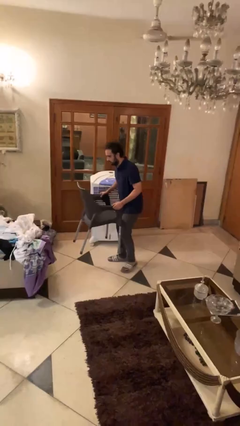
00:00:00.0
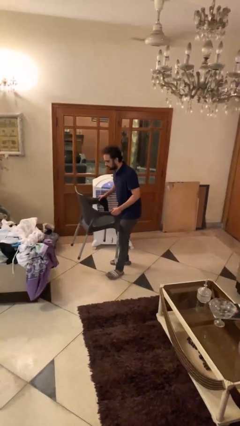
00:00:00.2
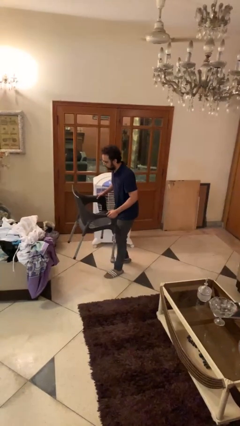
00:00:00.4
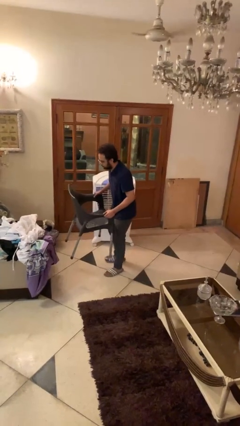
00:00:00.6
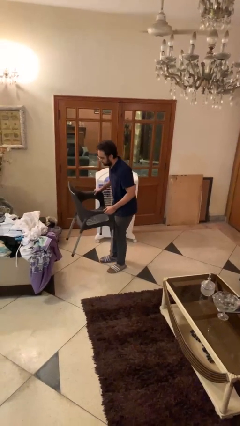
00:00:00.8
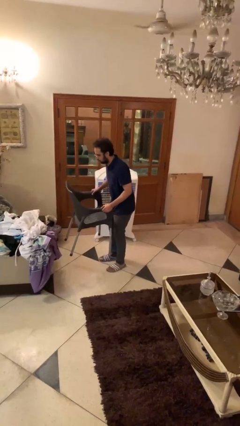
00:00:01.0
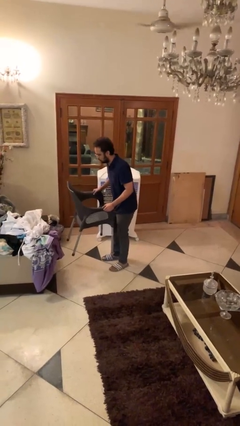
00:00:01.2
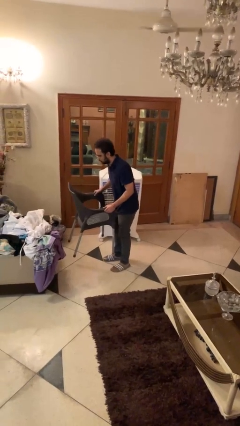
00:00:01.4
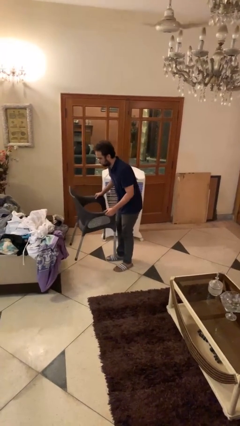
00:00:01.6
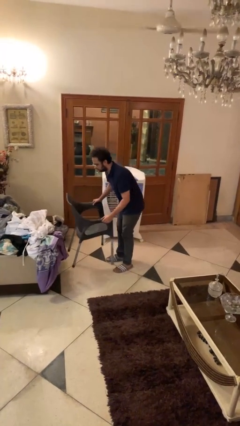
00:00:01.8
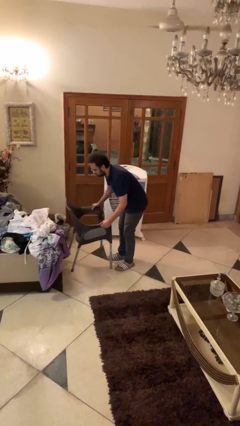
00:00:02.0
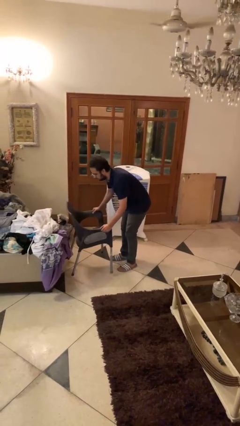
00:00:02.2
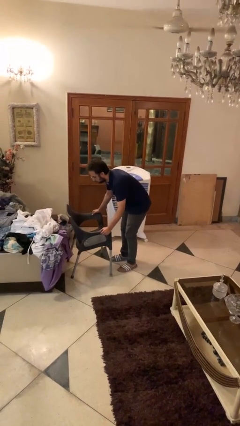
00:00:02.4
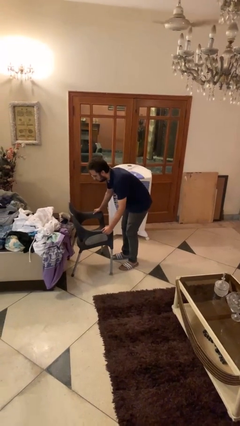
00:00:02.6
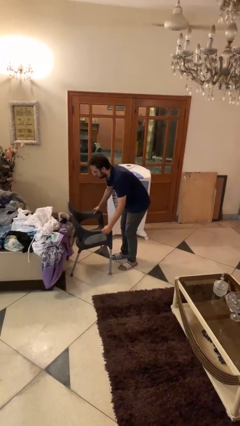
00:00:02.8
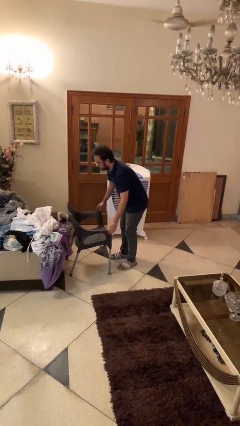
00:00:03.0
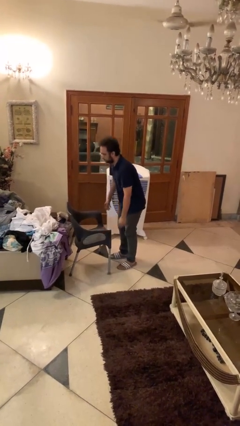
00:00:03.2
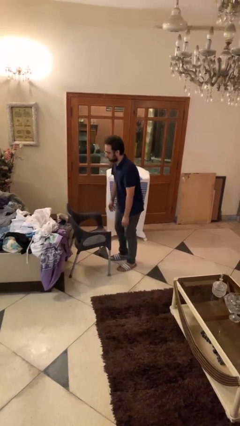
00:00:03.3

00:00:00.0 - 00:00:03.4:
person puts down object on floor

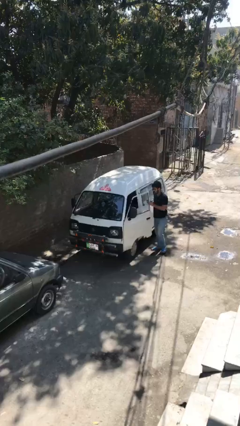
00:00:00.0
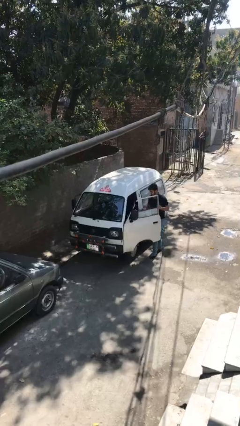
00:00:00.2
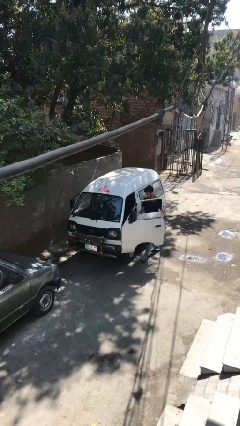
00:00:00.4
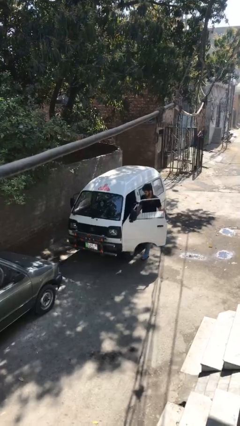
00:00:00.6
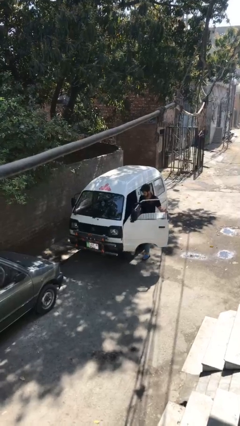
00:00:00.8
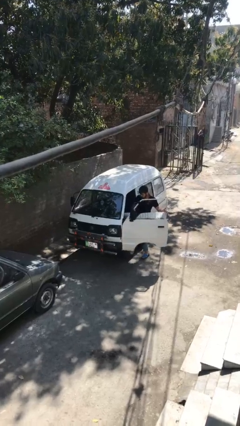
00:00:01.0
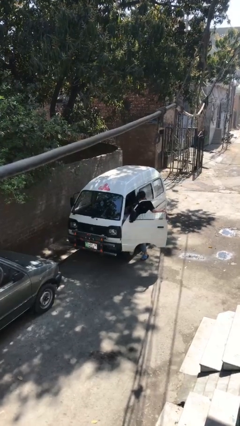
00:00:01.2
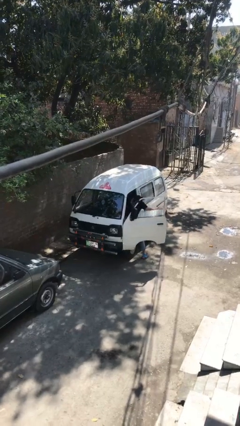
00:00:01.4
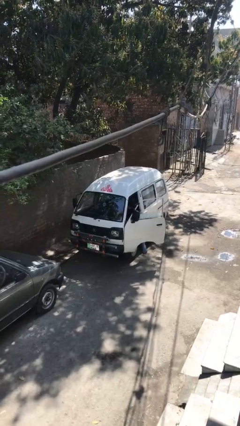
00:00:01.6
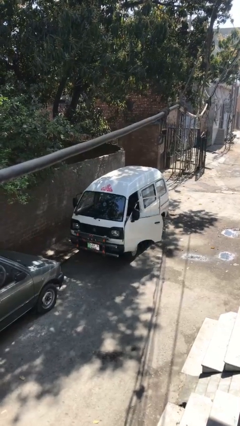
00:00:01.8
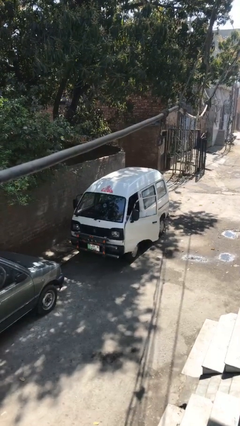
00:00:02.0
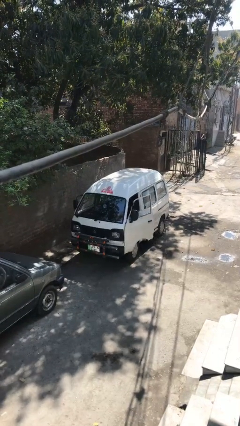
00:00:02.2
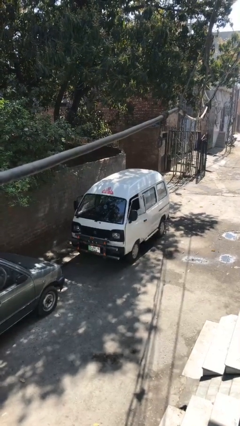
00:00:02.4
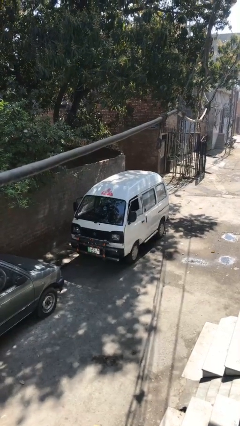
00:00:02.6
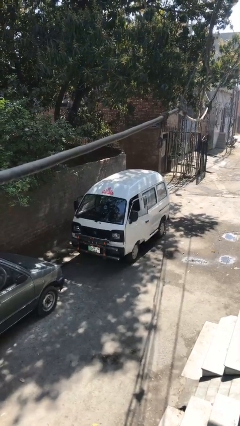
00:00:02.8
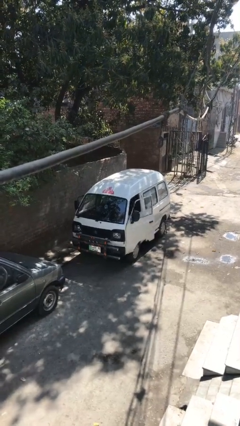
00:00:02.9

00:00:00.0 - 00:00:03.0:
car picks up person

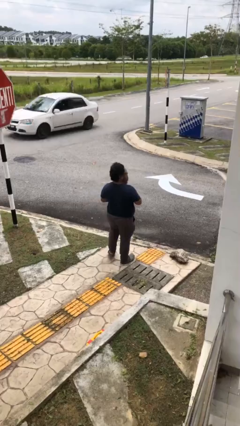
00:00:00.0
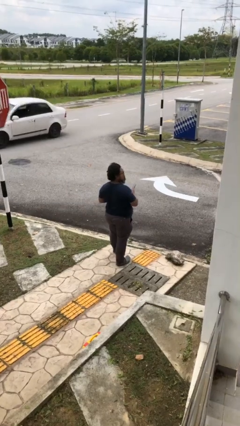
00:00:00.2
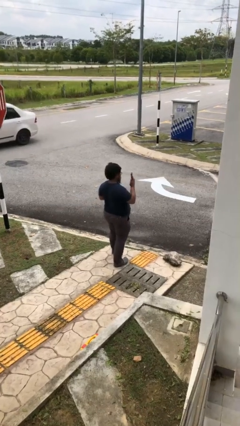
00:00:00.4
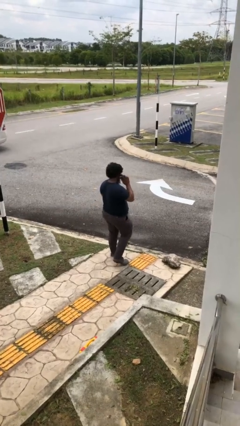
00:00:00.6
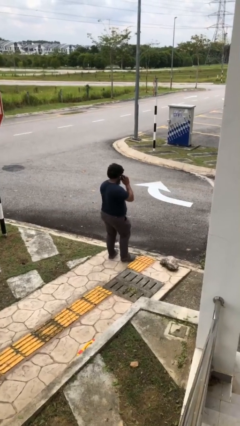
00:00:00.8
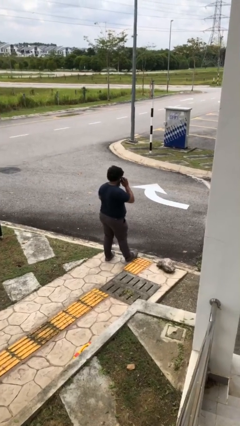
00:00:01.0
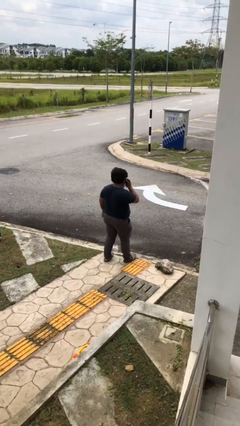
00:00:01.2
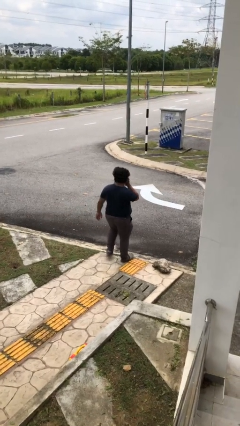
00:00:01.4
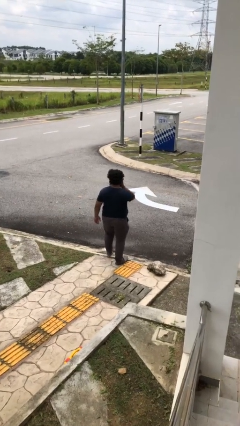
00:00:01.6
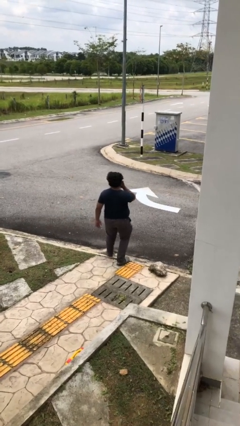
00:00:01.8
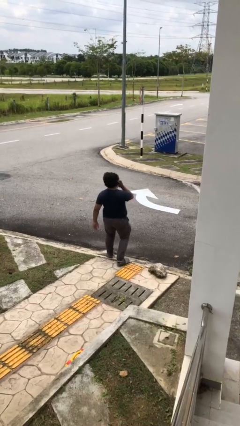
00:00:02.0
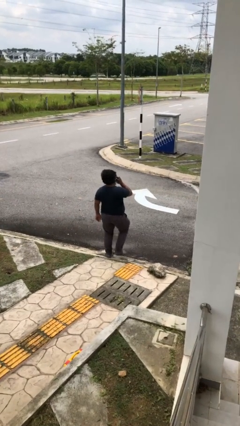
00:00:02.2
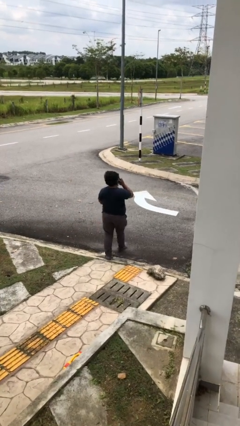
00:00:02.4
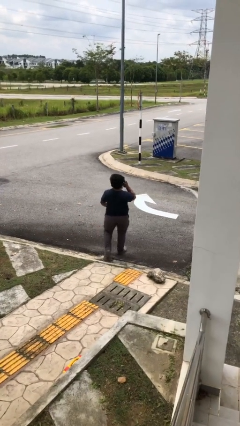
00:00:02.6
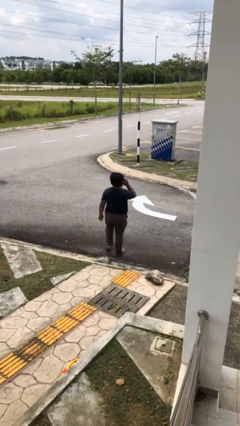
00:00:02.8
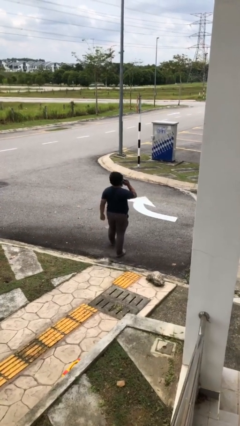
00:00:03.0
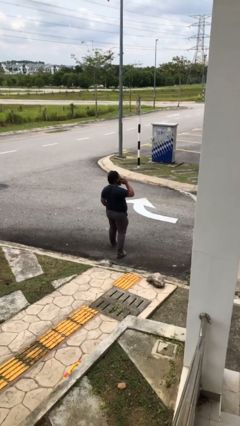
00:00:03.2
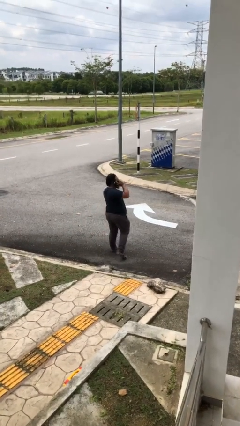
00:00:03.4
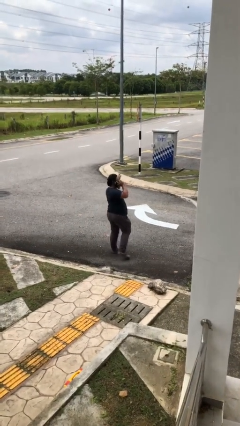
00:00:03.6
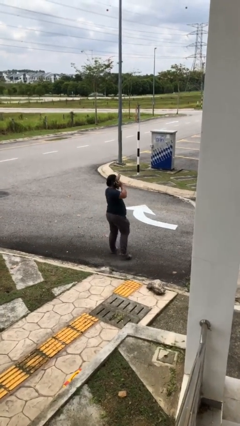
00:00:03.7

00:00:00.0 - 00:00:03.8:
person talks on phone

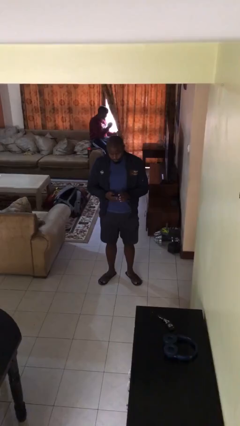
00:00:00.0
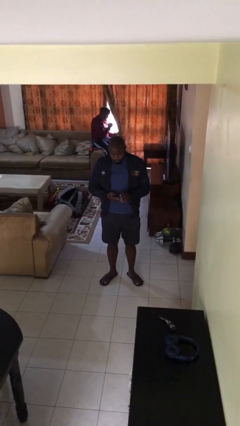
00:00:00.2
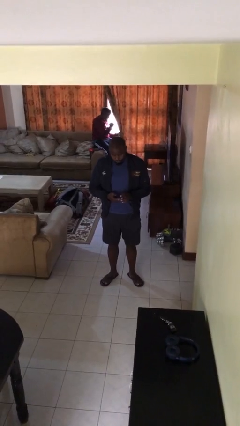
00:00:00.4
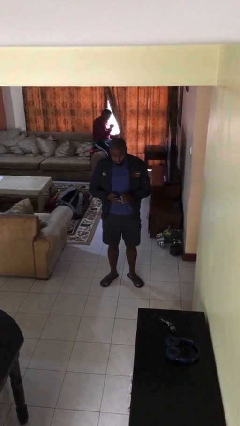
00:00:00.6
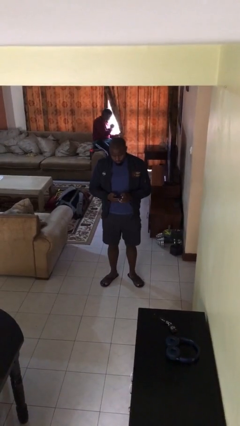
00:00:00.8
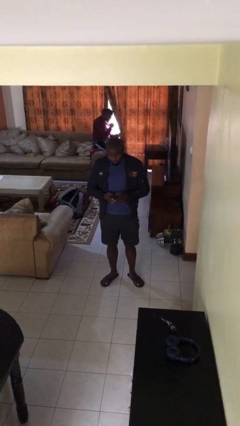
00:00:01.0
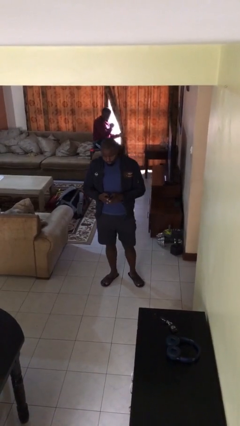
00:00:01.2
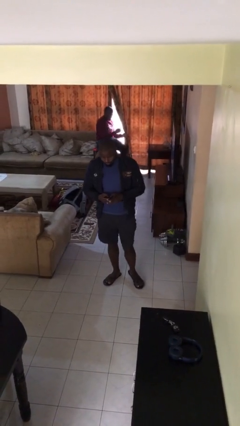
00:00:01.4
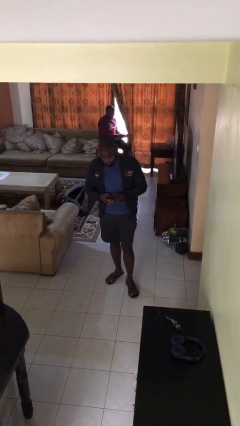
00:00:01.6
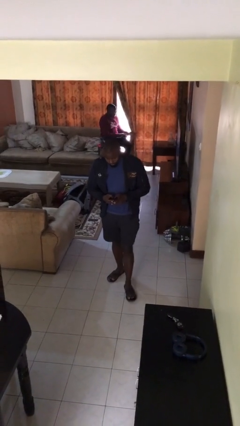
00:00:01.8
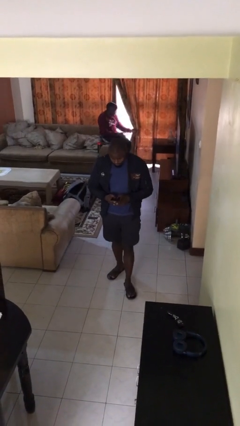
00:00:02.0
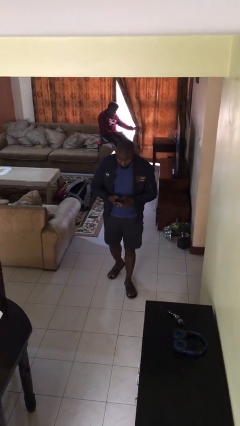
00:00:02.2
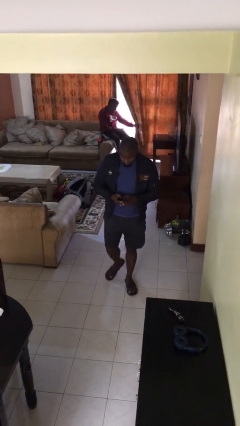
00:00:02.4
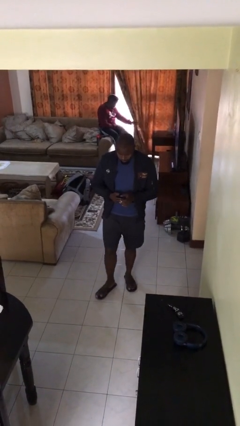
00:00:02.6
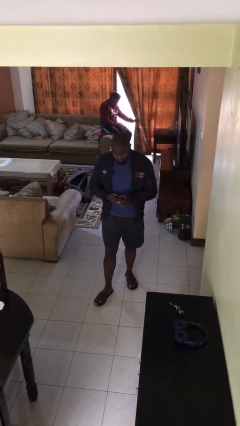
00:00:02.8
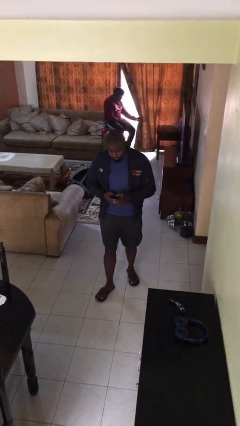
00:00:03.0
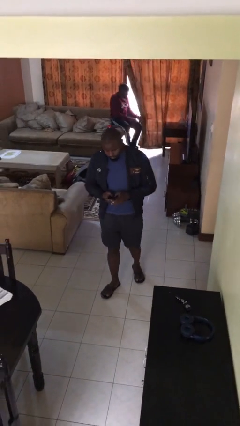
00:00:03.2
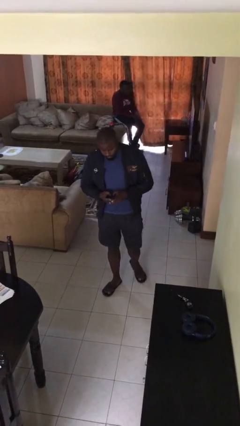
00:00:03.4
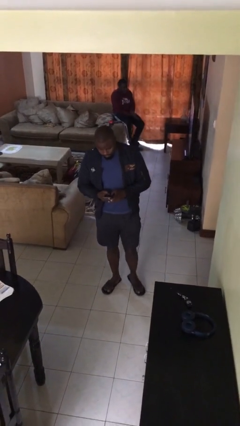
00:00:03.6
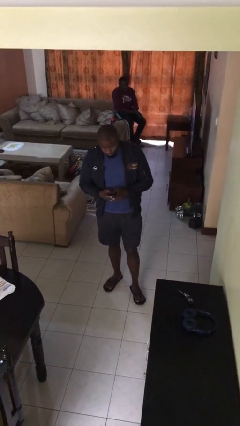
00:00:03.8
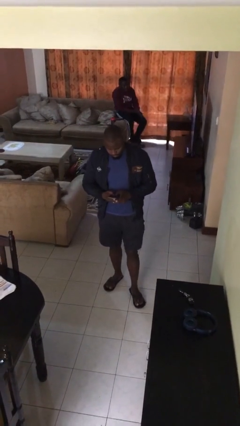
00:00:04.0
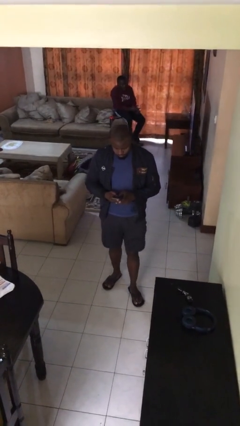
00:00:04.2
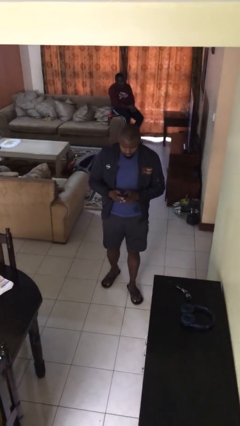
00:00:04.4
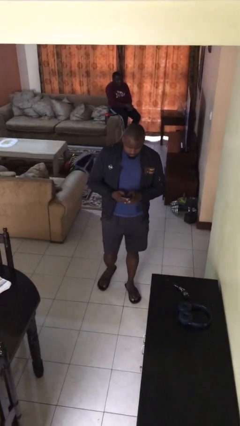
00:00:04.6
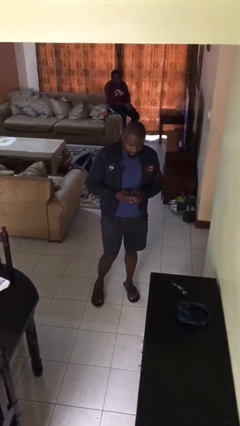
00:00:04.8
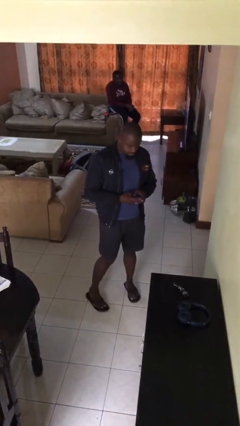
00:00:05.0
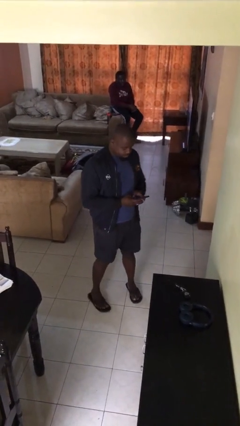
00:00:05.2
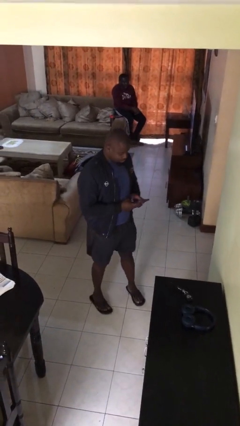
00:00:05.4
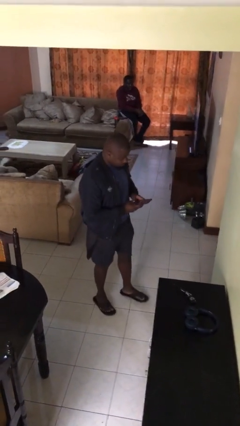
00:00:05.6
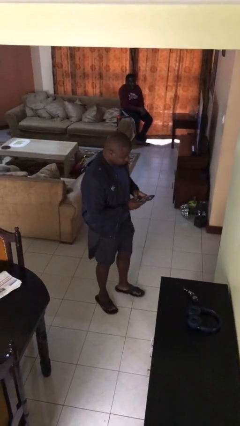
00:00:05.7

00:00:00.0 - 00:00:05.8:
person texts on phone

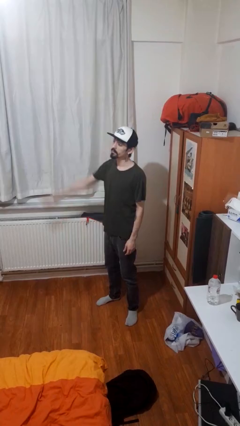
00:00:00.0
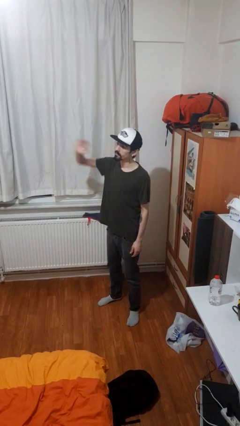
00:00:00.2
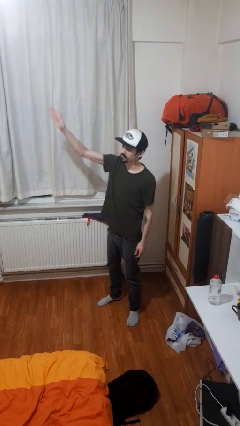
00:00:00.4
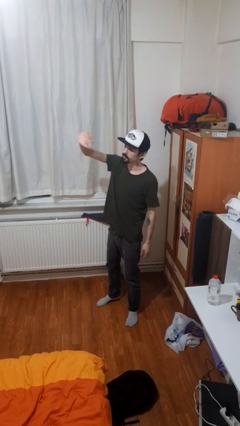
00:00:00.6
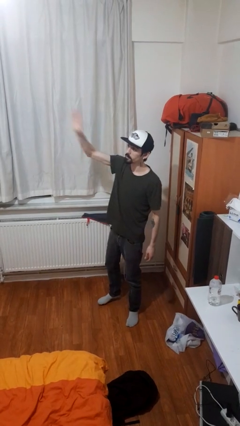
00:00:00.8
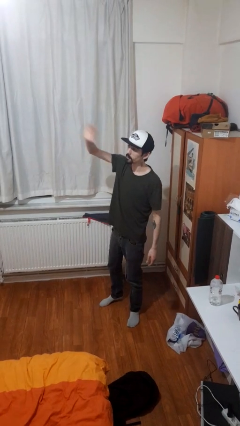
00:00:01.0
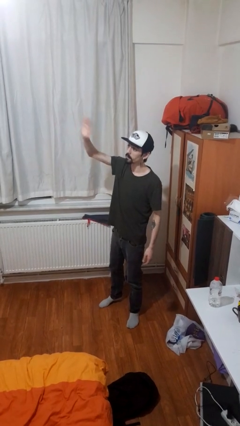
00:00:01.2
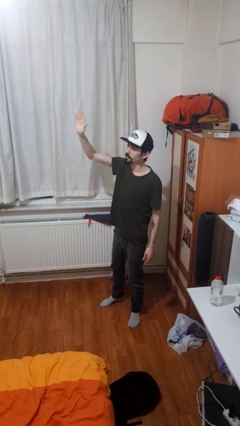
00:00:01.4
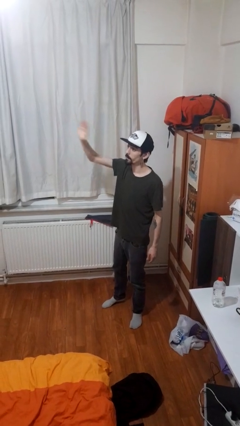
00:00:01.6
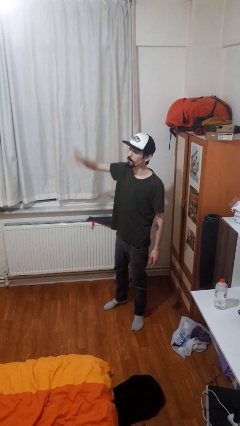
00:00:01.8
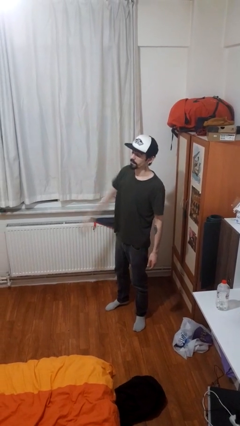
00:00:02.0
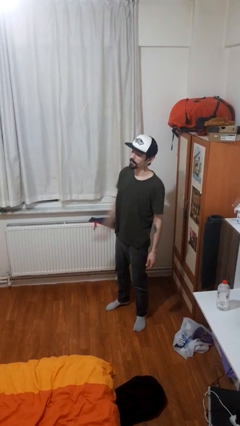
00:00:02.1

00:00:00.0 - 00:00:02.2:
person waves at person
